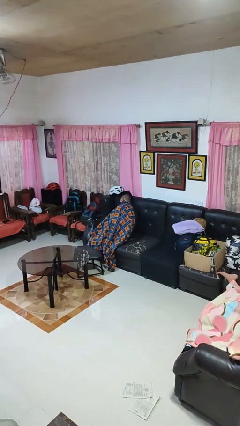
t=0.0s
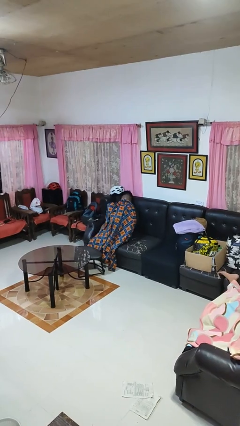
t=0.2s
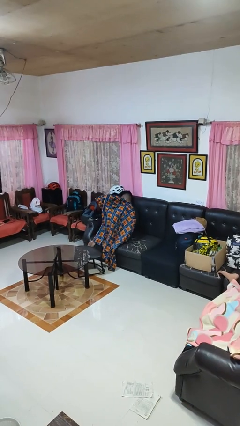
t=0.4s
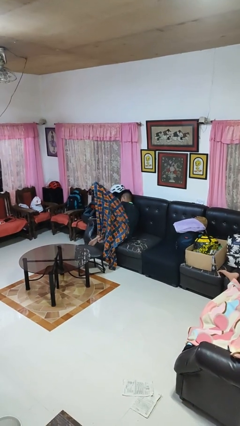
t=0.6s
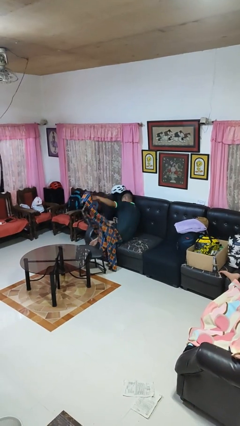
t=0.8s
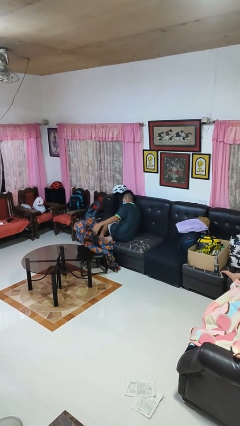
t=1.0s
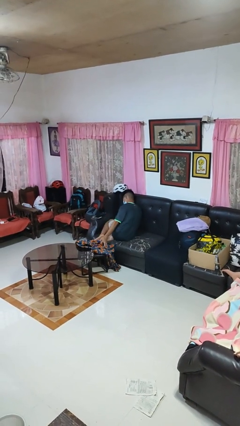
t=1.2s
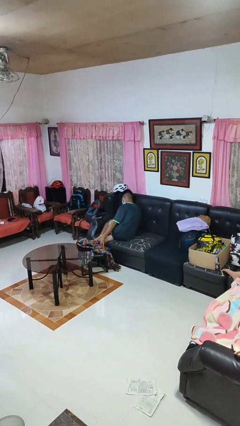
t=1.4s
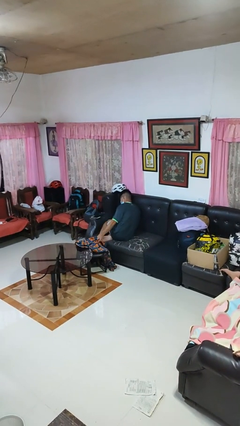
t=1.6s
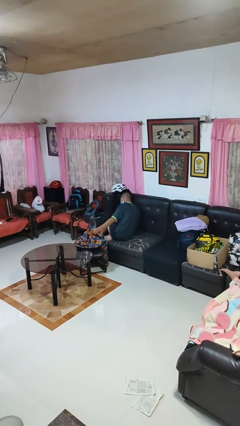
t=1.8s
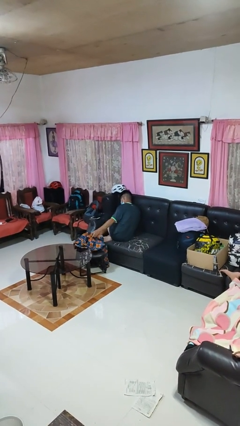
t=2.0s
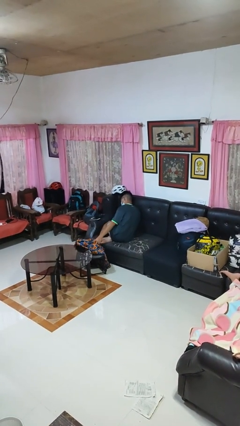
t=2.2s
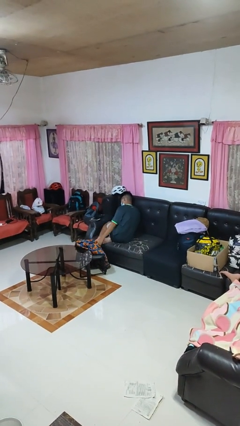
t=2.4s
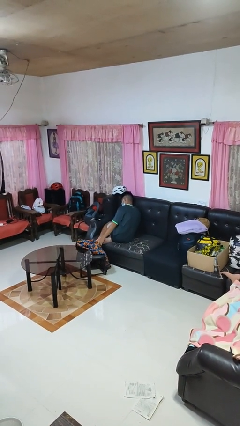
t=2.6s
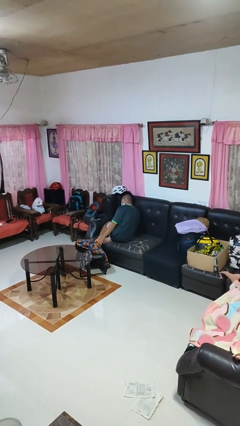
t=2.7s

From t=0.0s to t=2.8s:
person uncovers with blanket

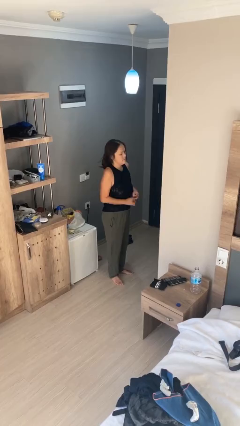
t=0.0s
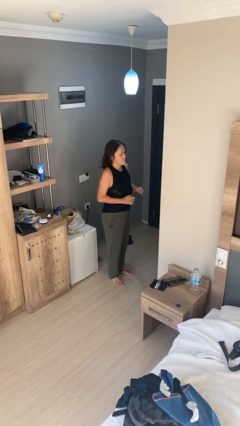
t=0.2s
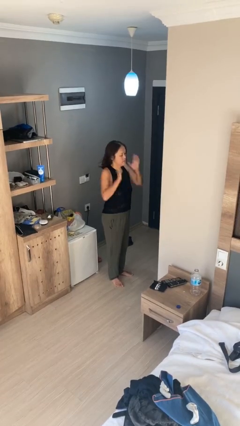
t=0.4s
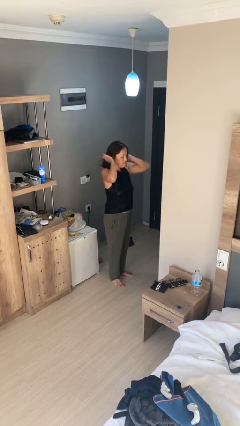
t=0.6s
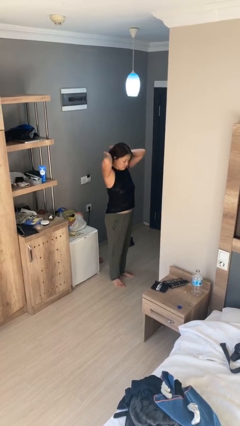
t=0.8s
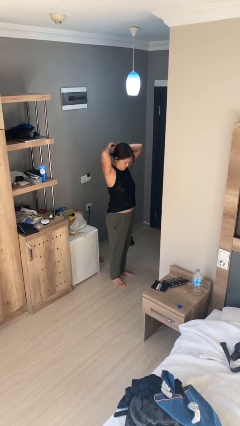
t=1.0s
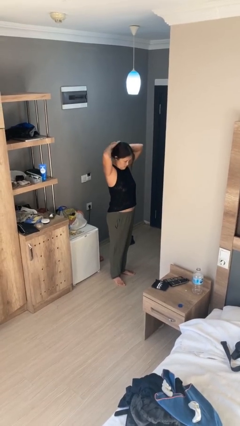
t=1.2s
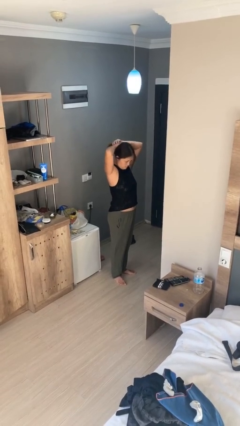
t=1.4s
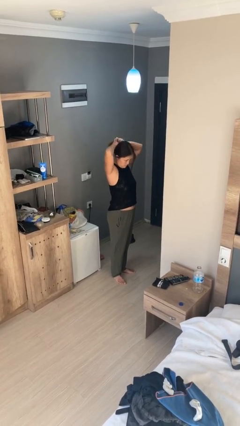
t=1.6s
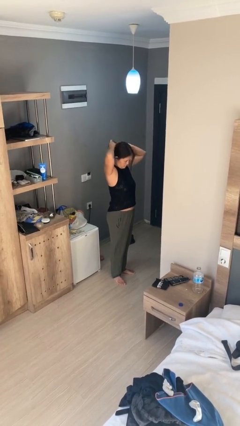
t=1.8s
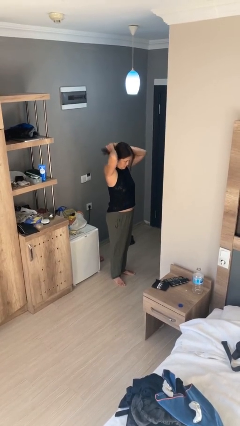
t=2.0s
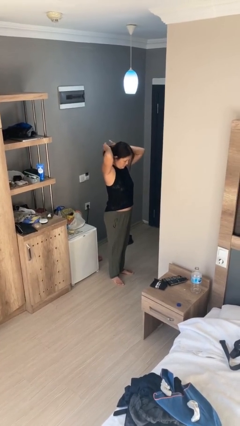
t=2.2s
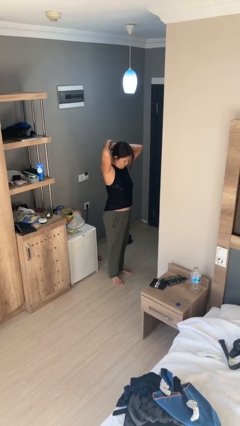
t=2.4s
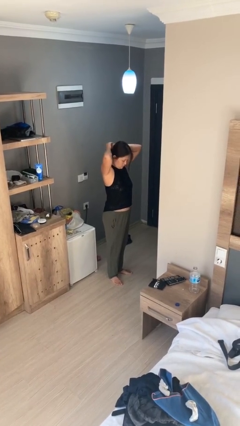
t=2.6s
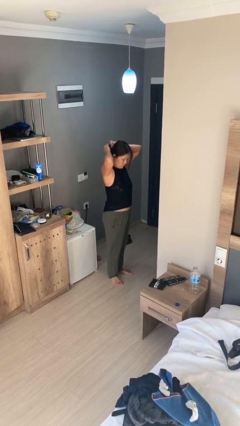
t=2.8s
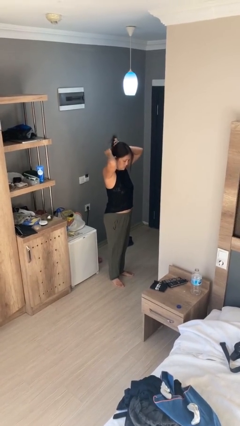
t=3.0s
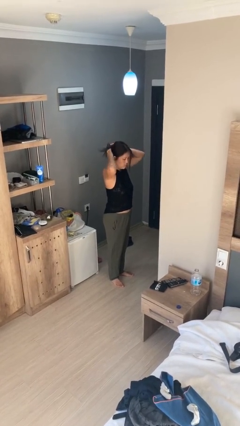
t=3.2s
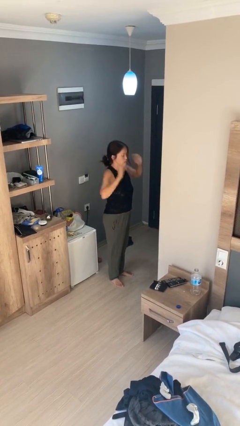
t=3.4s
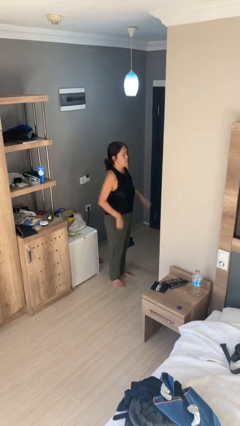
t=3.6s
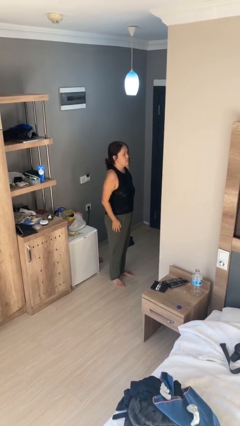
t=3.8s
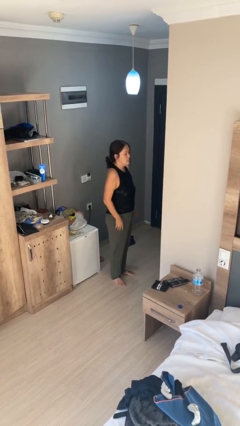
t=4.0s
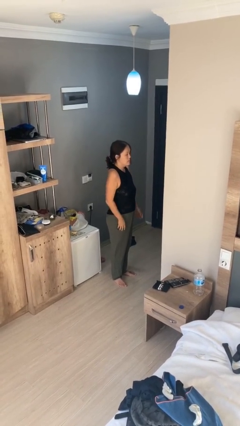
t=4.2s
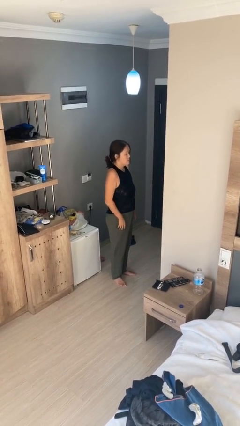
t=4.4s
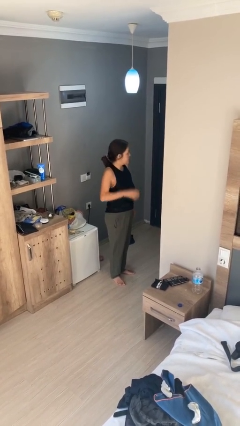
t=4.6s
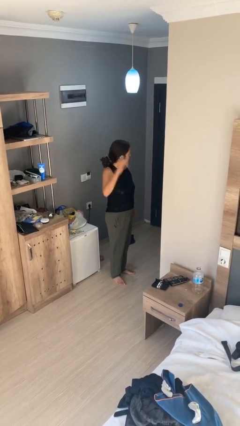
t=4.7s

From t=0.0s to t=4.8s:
person puts hair in ponytail

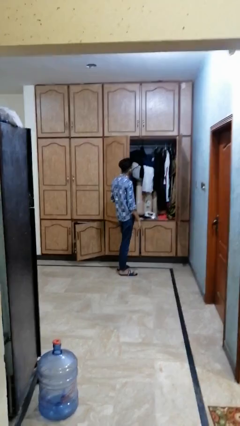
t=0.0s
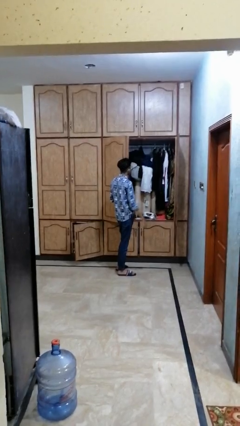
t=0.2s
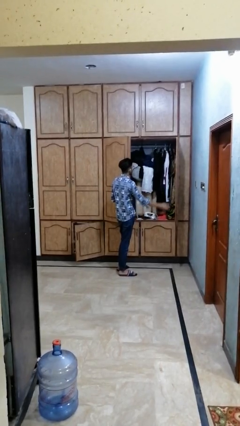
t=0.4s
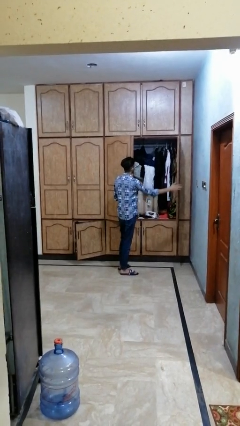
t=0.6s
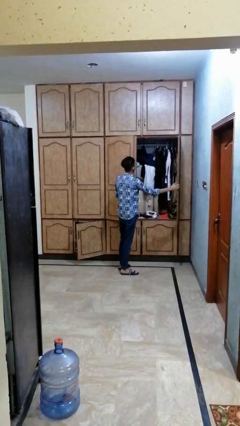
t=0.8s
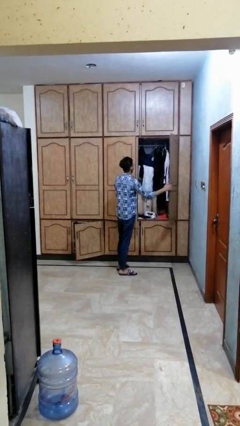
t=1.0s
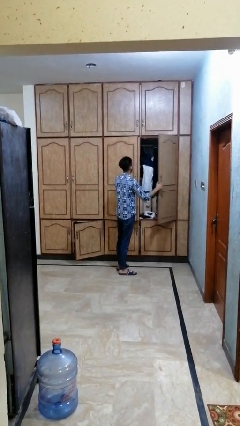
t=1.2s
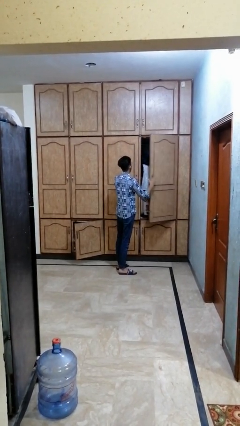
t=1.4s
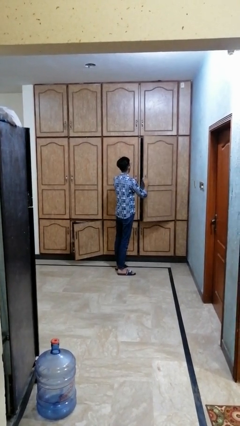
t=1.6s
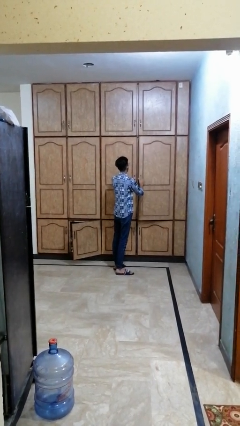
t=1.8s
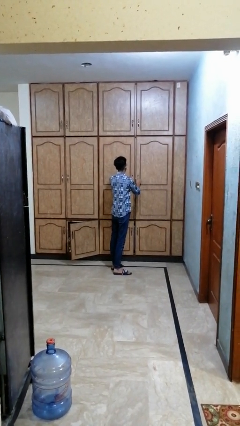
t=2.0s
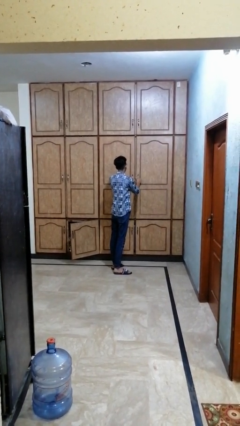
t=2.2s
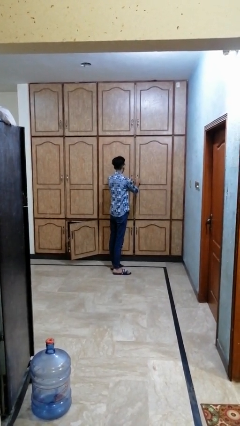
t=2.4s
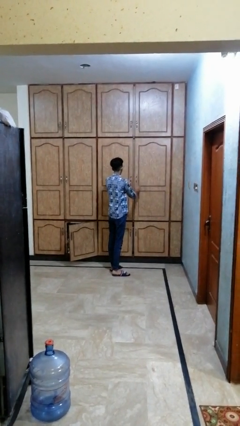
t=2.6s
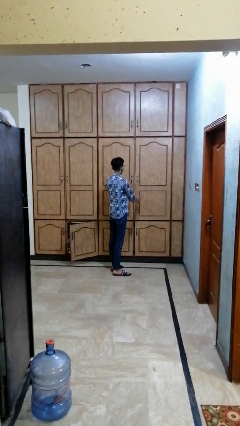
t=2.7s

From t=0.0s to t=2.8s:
person closes dresser drawer

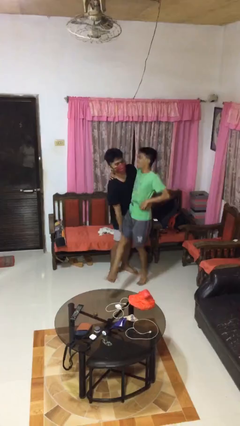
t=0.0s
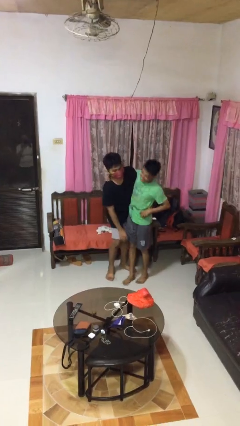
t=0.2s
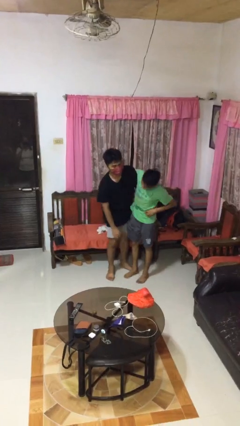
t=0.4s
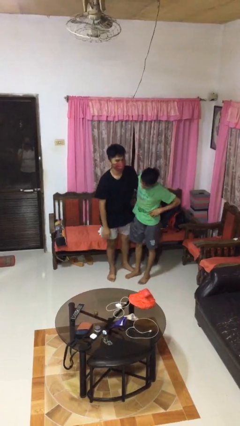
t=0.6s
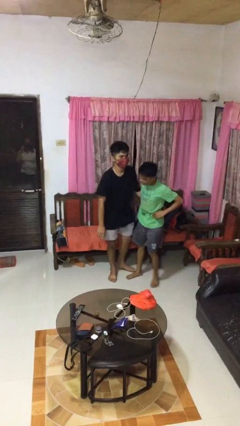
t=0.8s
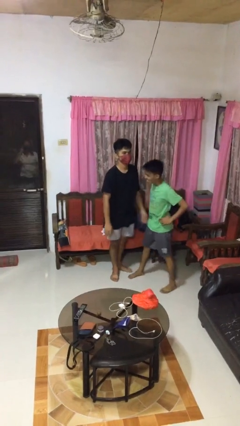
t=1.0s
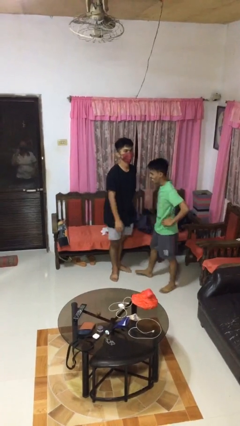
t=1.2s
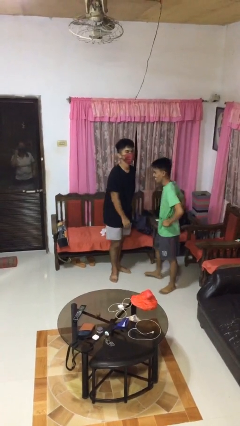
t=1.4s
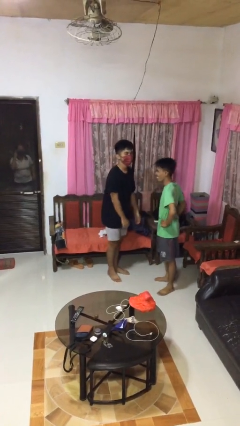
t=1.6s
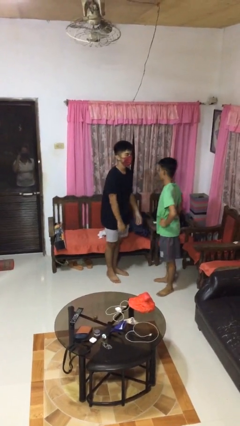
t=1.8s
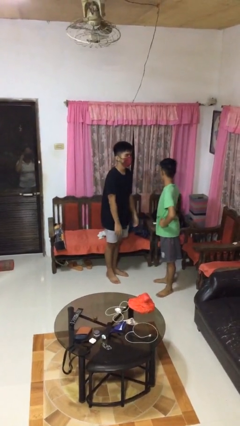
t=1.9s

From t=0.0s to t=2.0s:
person puts down person

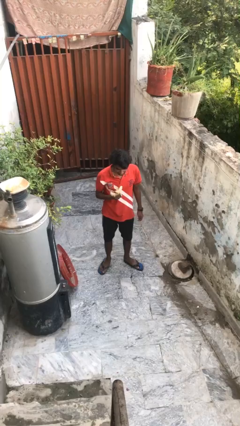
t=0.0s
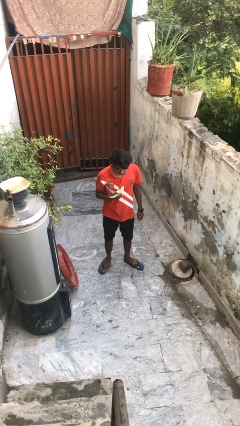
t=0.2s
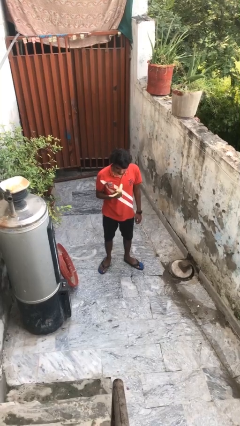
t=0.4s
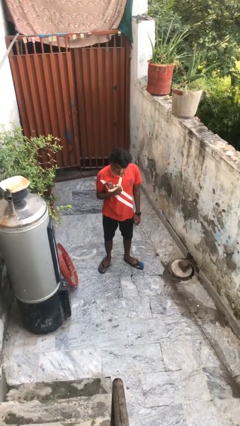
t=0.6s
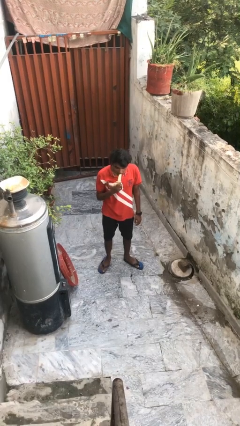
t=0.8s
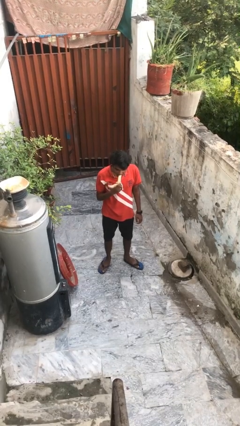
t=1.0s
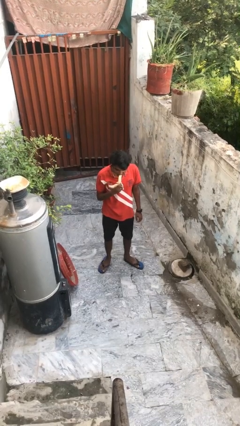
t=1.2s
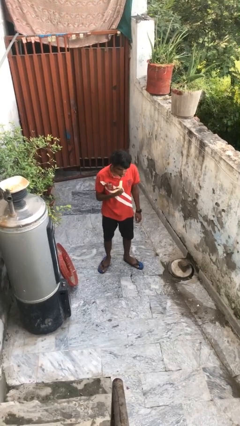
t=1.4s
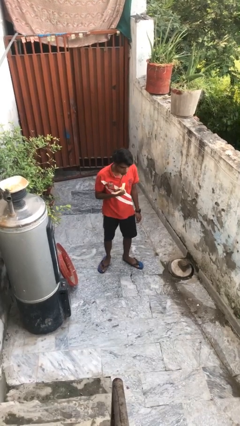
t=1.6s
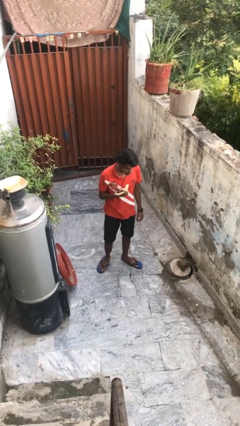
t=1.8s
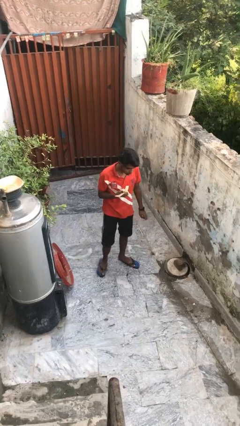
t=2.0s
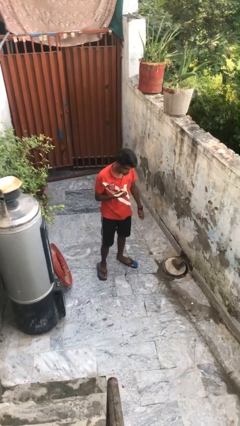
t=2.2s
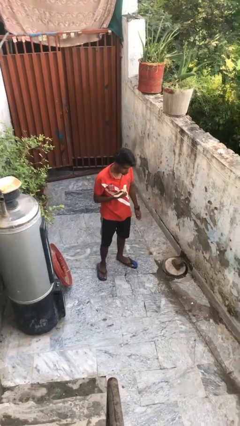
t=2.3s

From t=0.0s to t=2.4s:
person eats banana

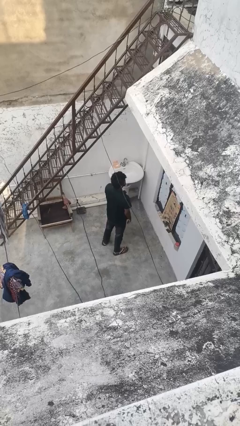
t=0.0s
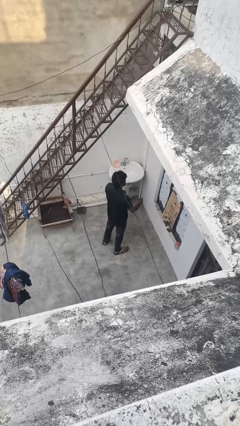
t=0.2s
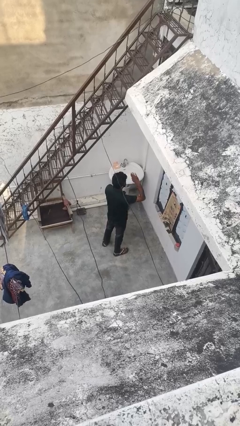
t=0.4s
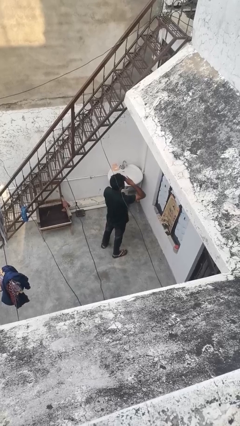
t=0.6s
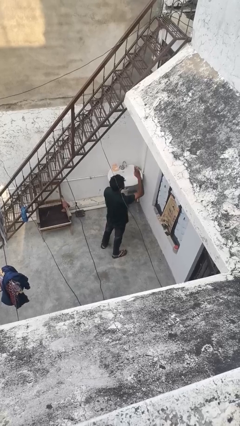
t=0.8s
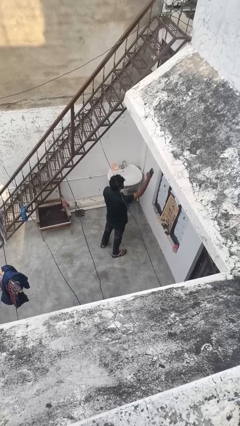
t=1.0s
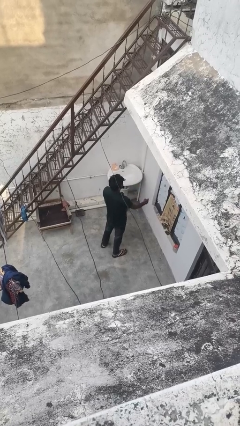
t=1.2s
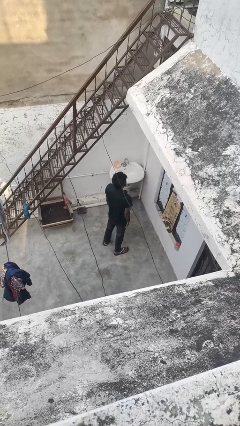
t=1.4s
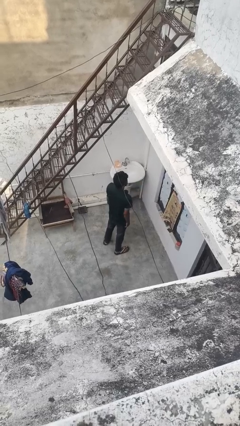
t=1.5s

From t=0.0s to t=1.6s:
person salutes

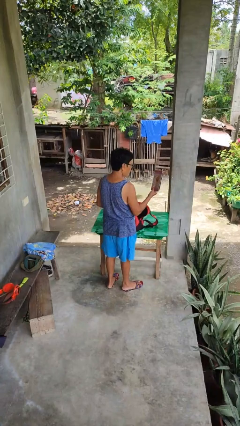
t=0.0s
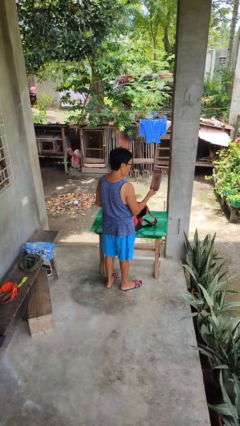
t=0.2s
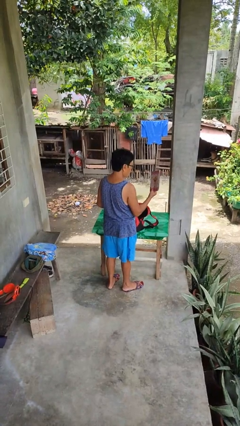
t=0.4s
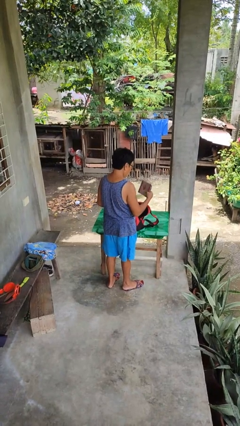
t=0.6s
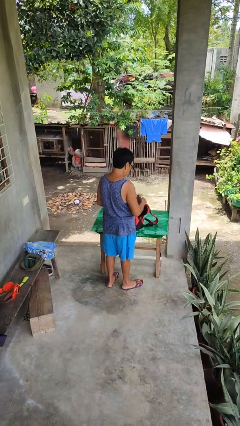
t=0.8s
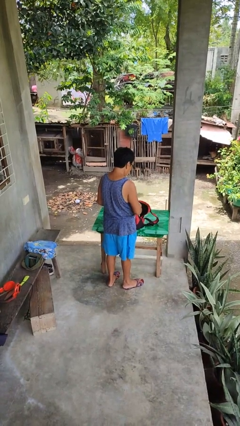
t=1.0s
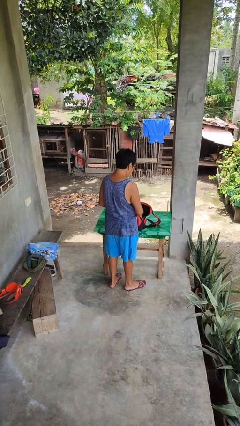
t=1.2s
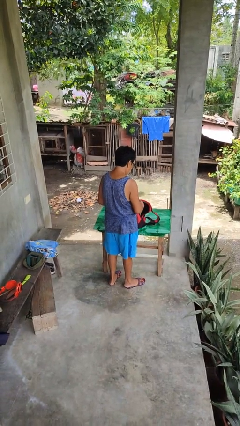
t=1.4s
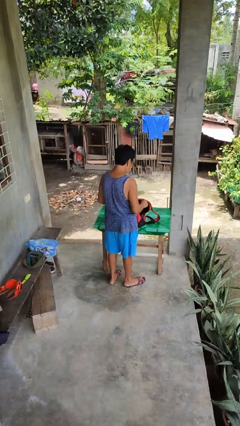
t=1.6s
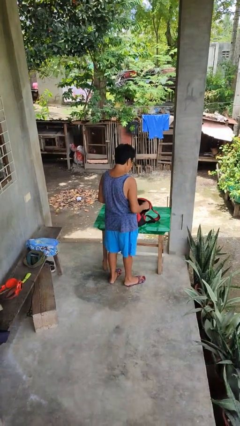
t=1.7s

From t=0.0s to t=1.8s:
person puts object into backpack
